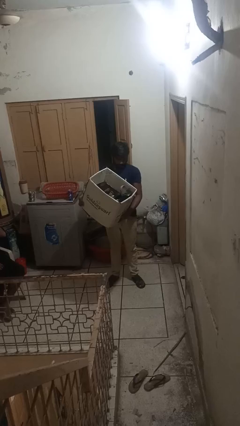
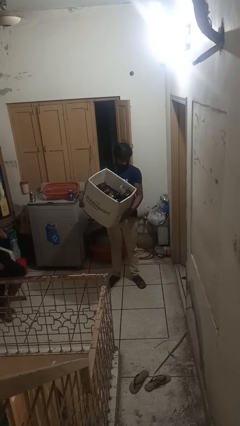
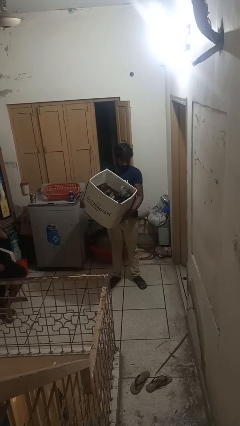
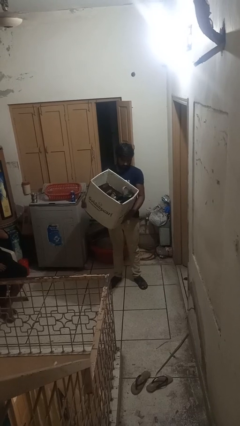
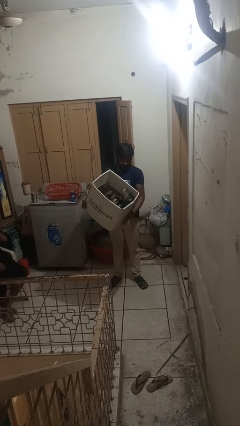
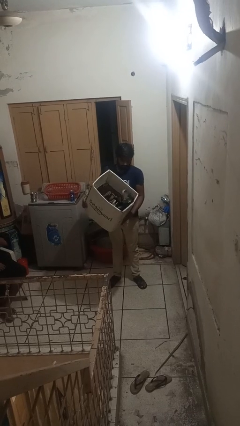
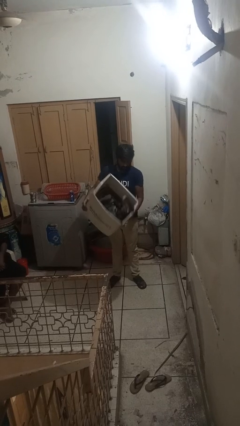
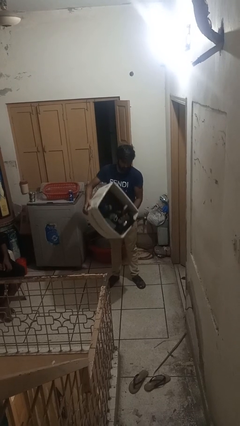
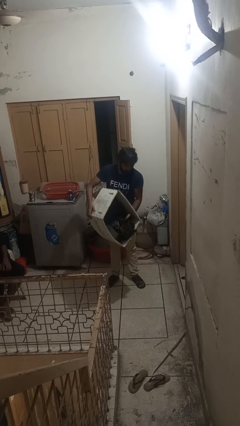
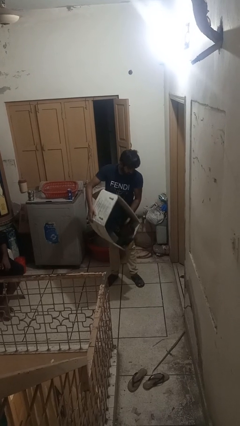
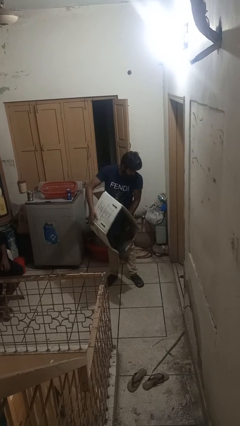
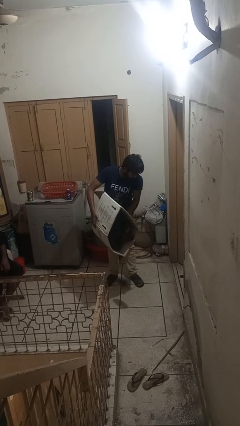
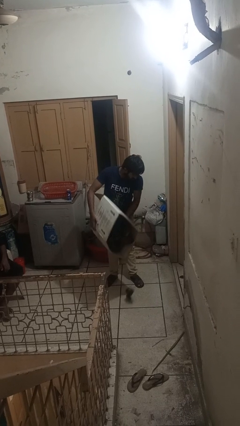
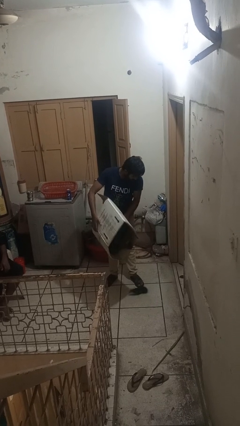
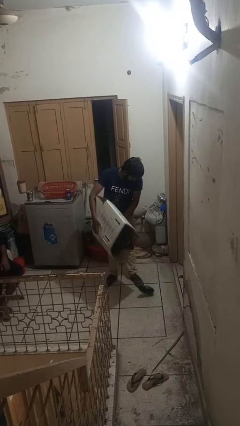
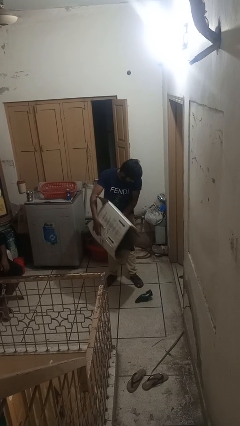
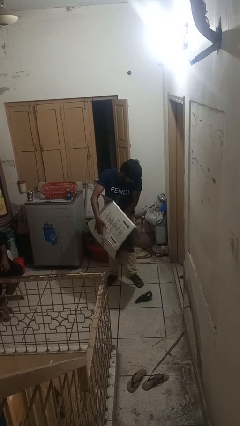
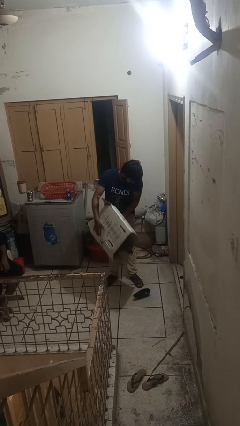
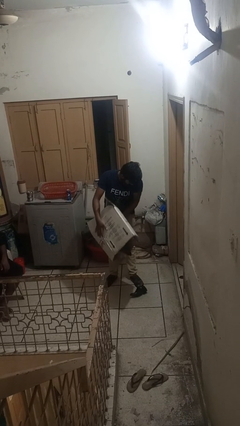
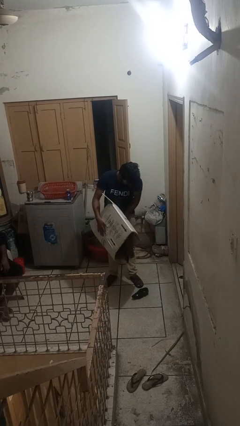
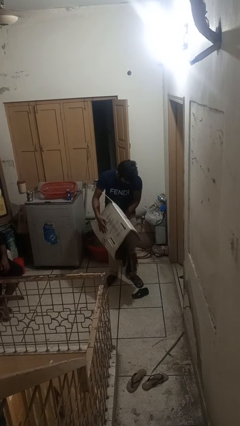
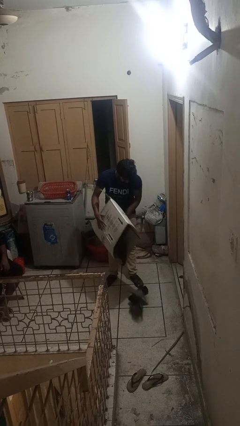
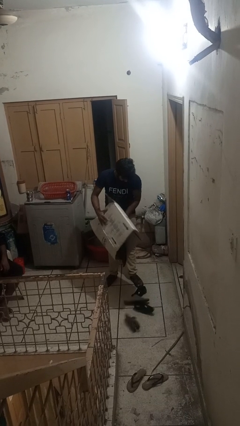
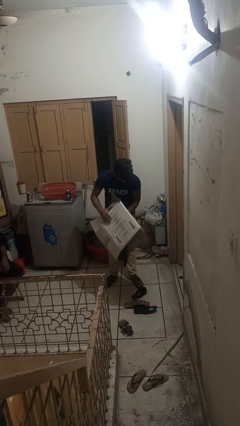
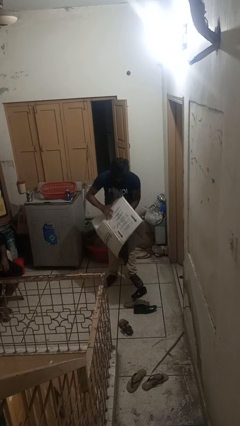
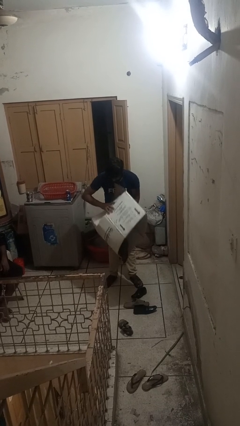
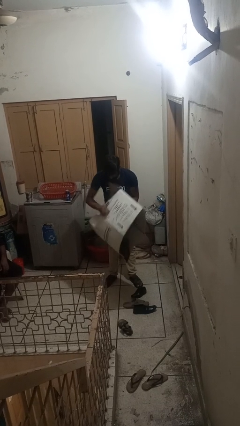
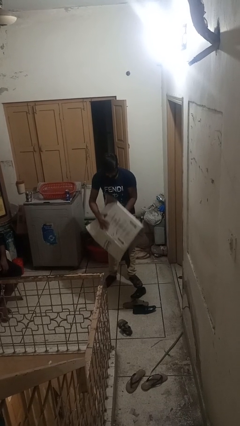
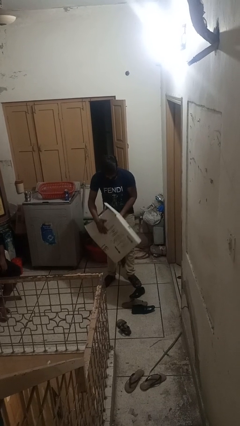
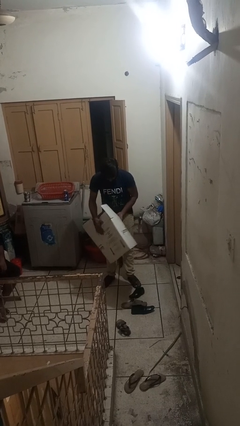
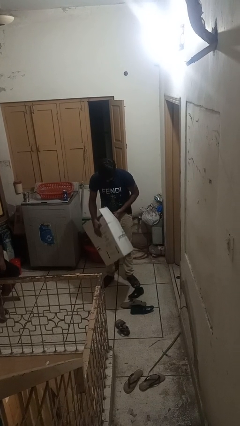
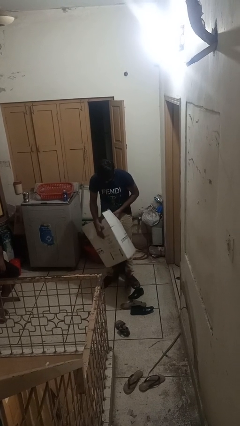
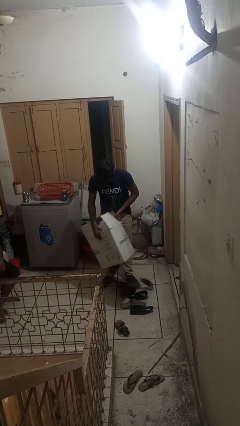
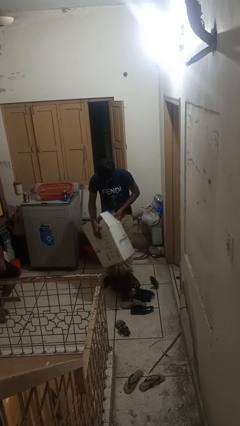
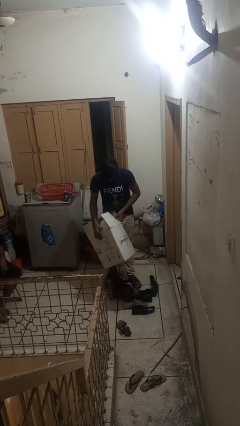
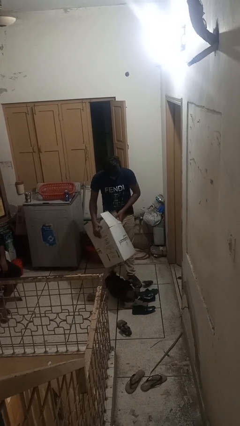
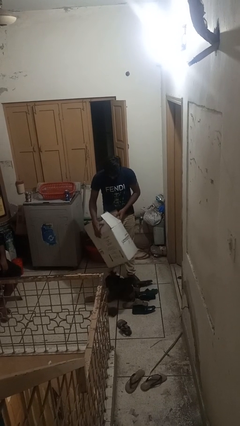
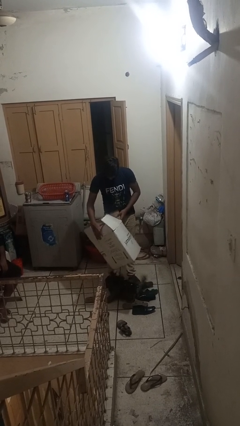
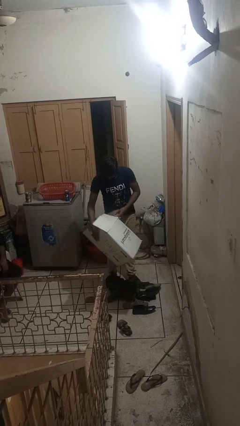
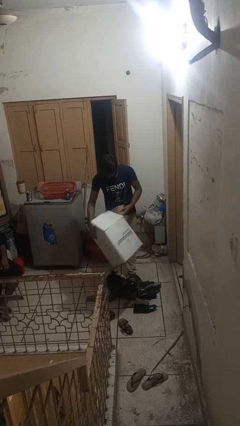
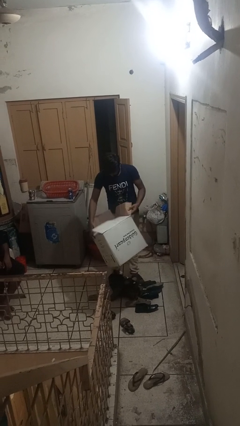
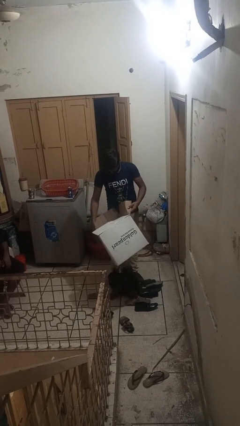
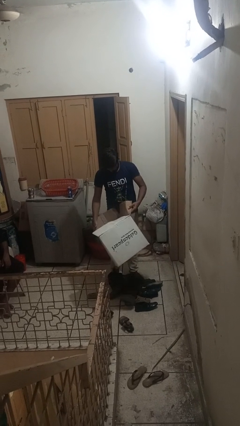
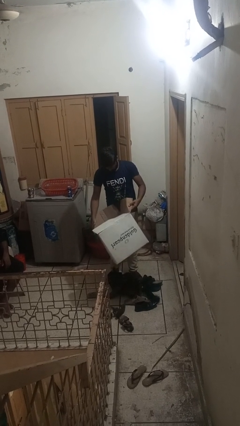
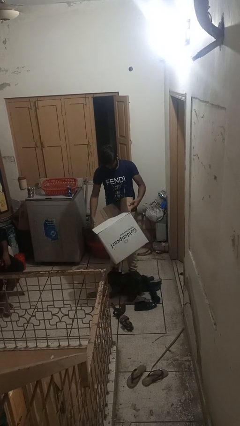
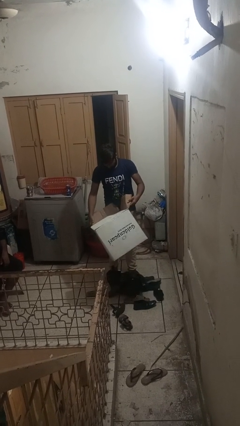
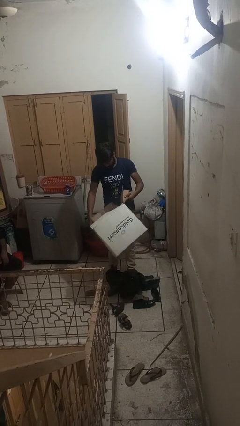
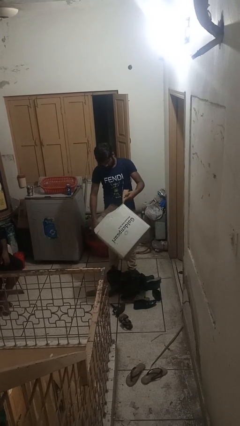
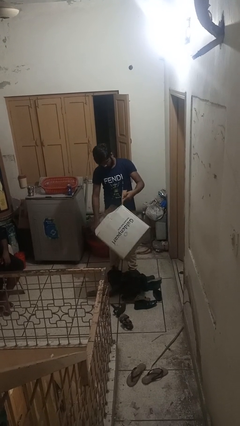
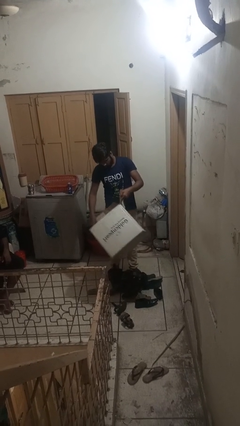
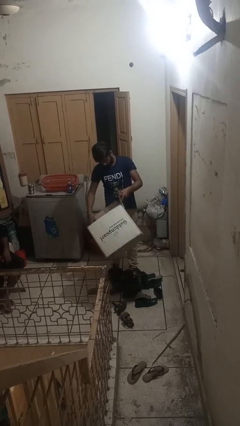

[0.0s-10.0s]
person unloads box onto floor

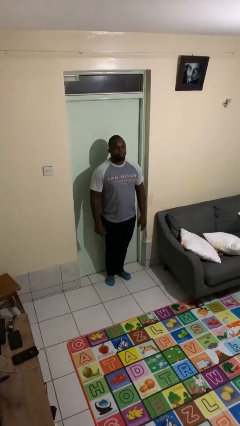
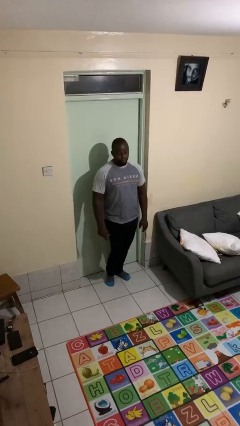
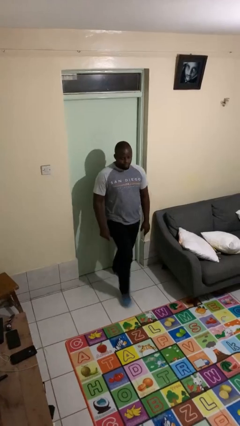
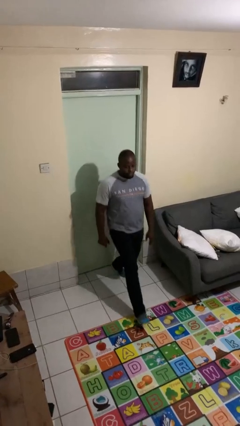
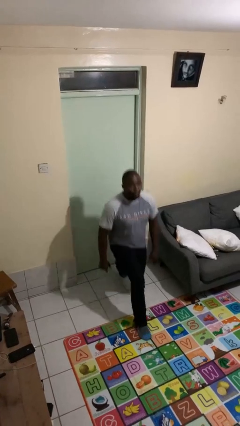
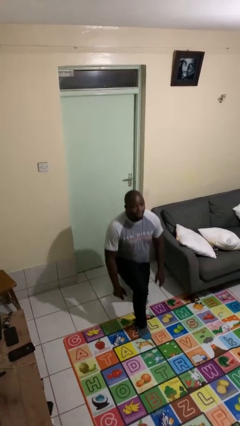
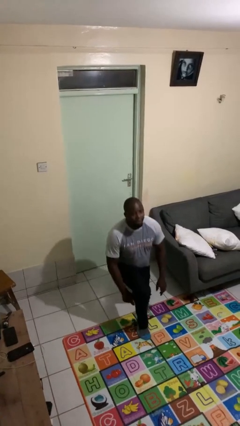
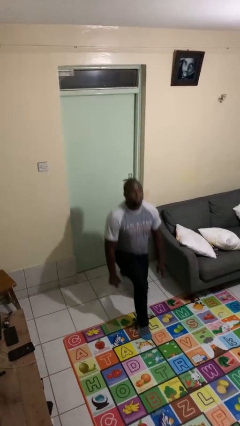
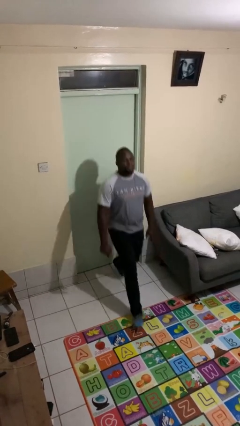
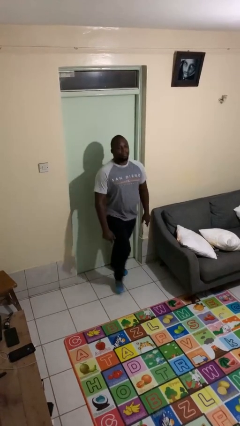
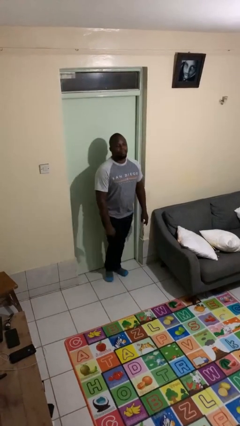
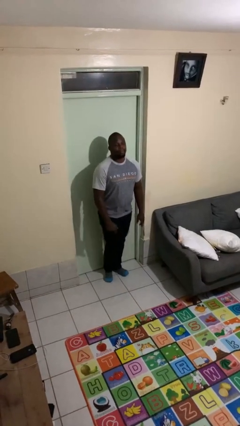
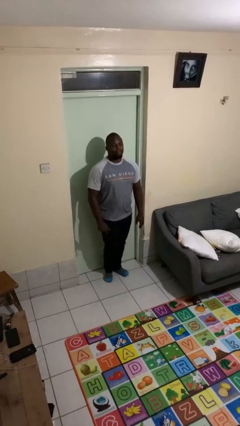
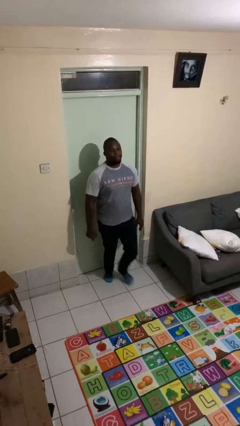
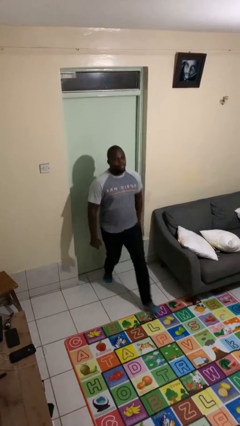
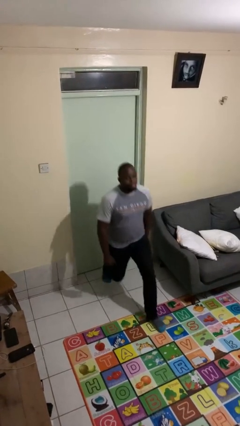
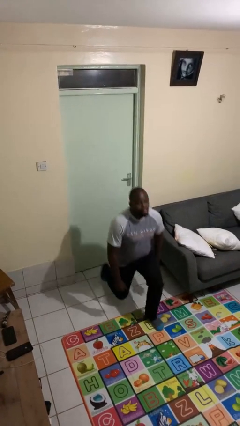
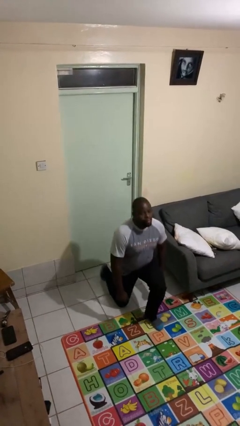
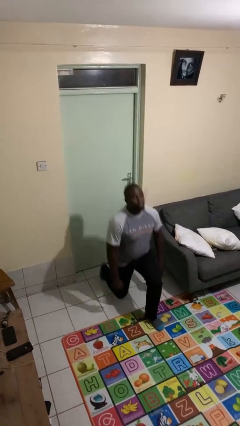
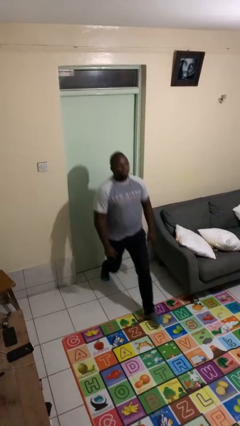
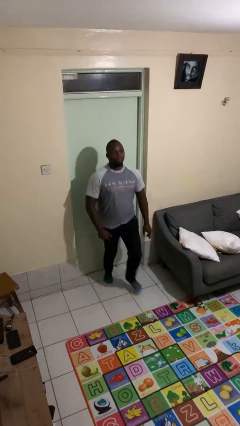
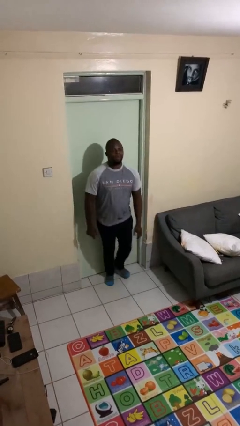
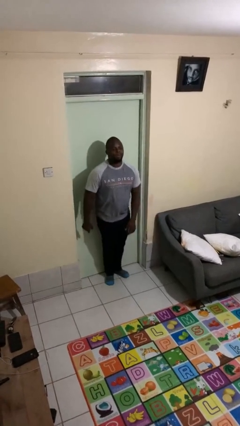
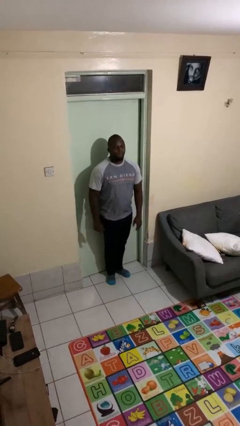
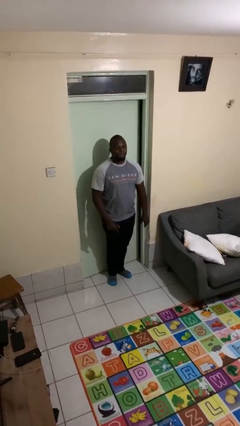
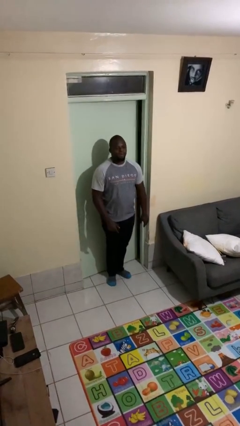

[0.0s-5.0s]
person exercises with lunges

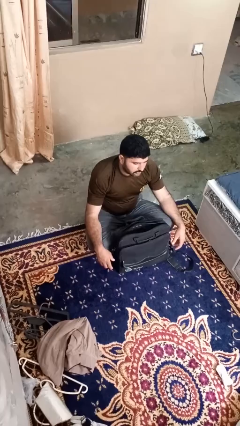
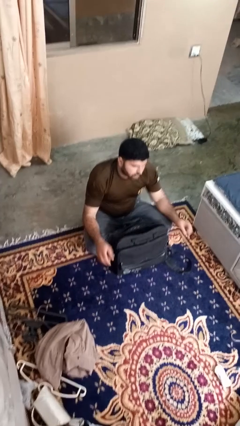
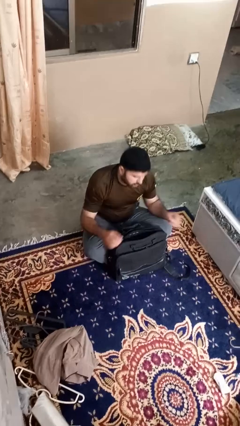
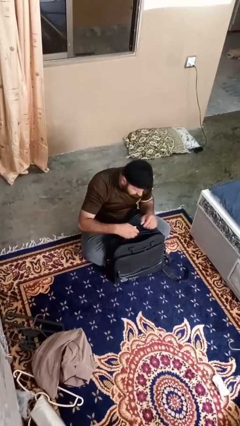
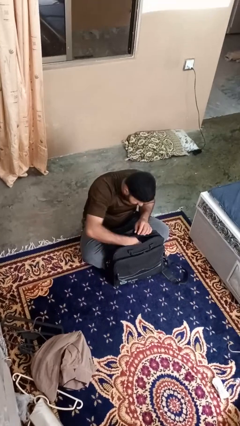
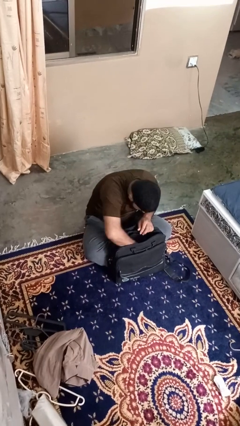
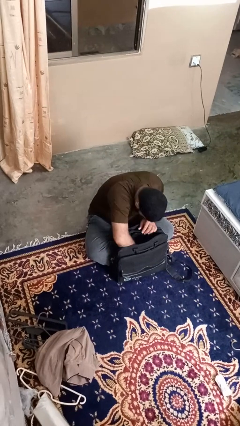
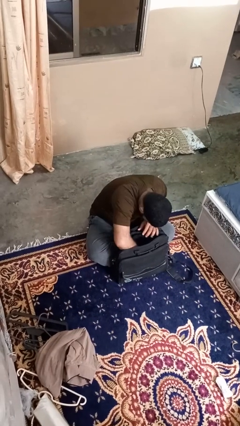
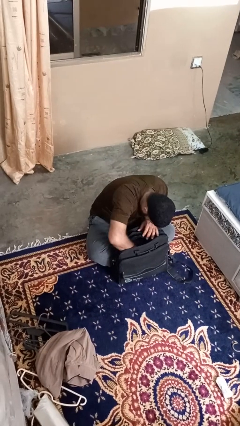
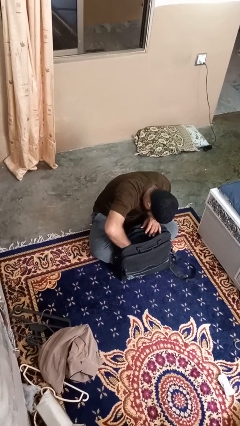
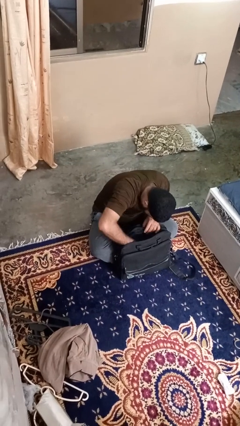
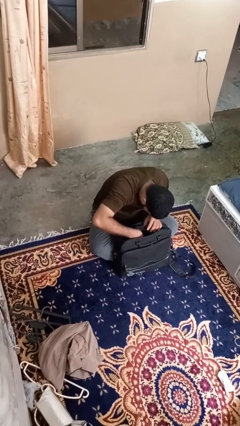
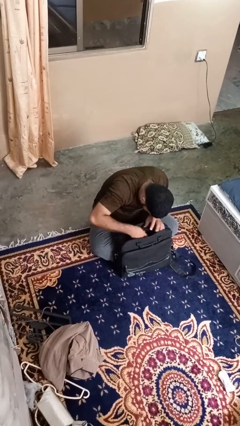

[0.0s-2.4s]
person searches in bag

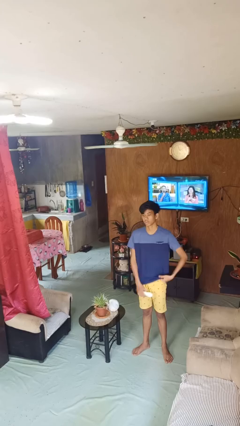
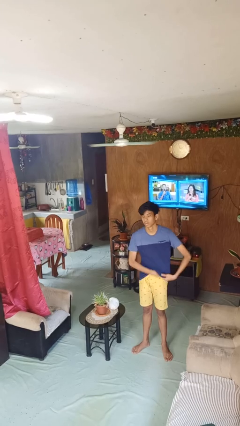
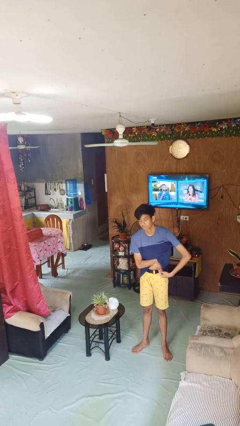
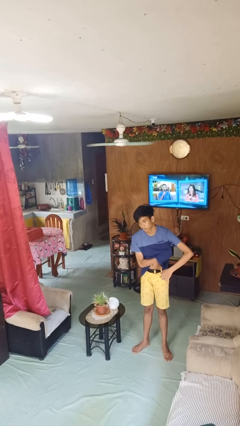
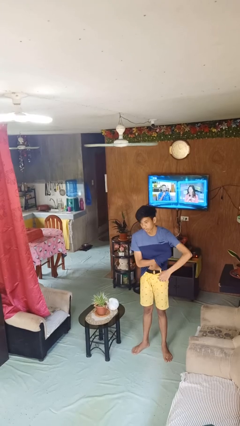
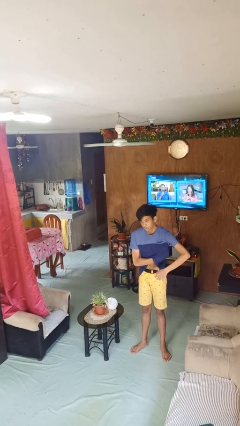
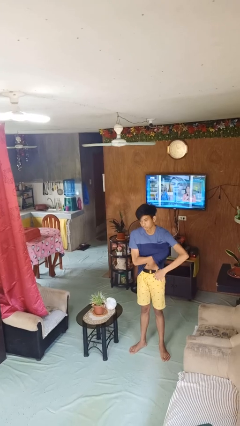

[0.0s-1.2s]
person applies deodorant
